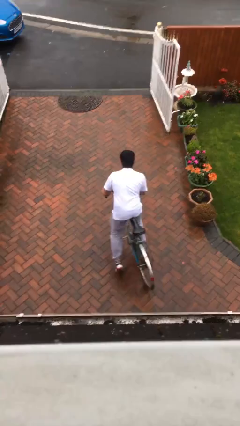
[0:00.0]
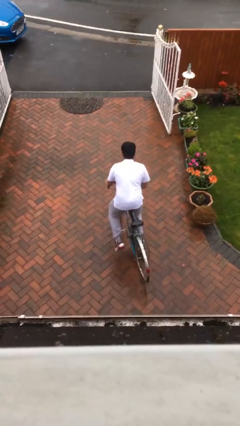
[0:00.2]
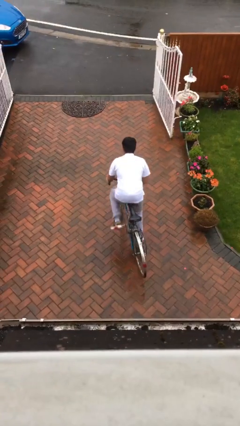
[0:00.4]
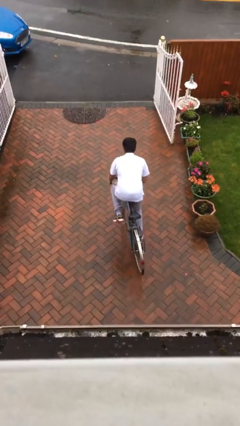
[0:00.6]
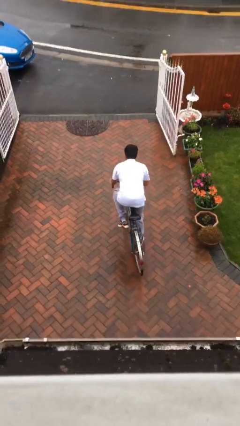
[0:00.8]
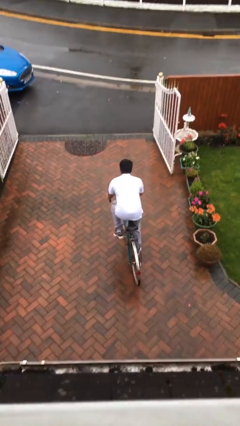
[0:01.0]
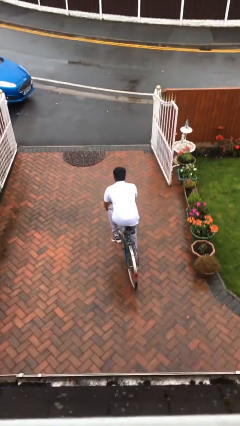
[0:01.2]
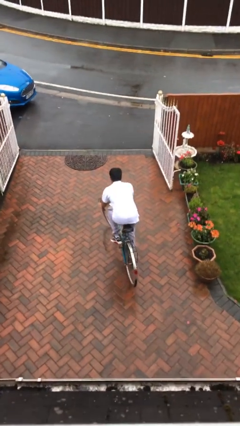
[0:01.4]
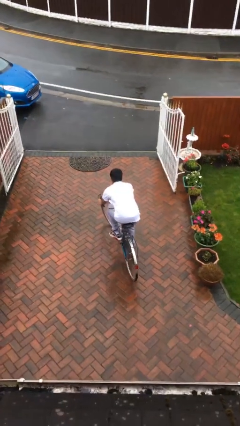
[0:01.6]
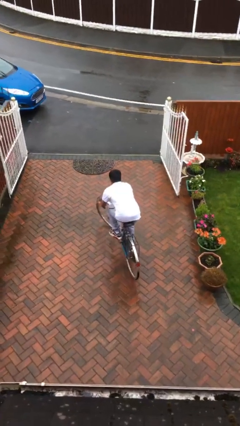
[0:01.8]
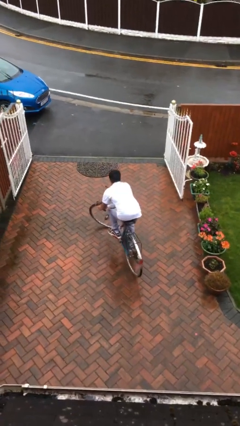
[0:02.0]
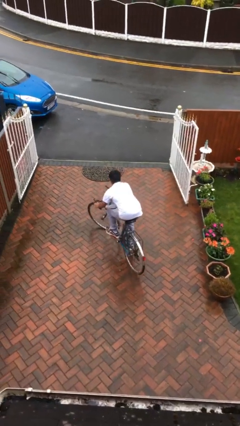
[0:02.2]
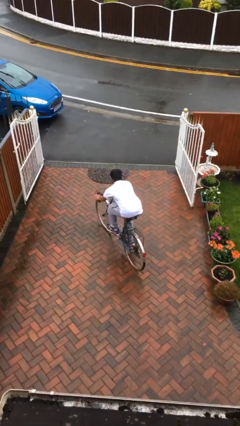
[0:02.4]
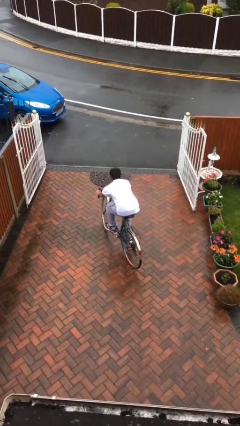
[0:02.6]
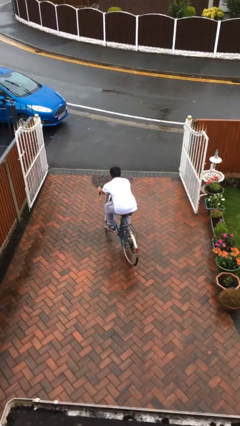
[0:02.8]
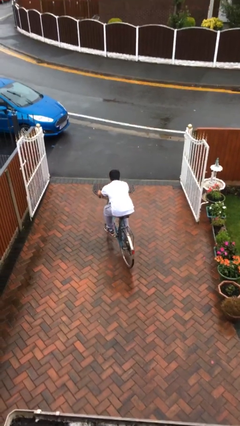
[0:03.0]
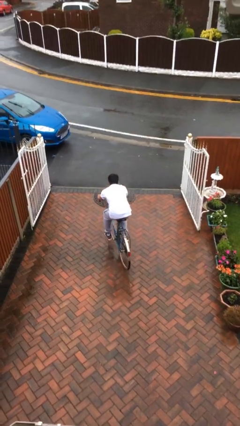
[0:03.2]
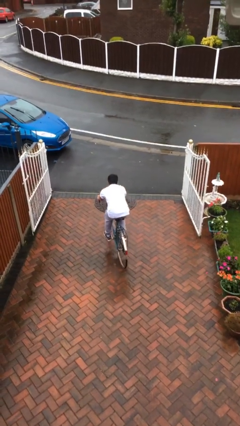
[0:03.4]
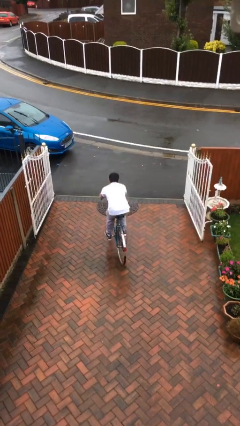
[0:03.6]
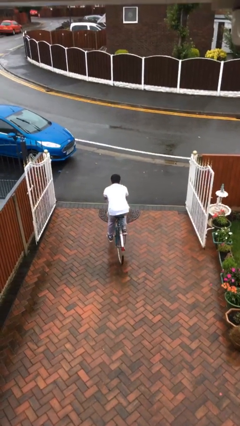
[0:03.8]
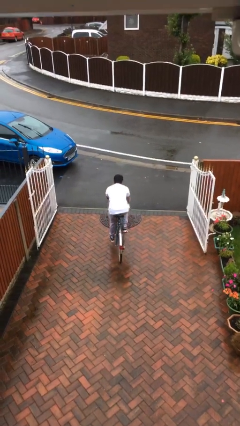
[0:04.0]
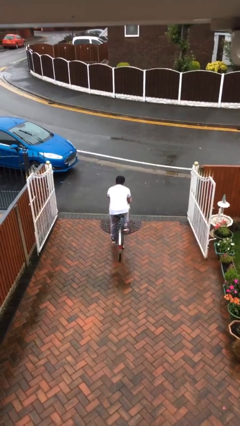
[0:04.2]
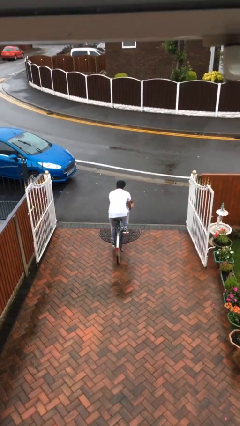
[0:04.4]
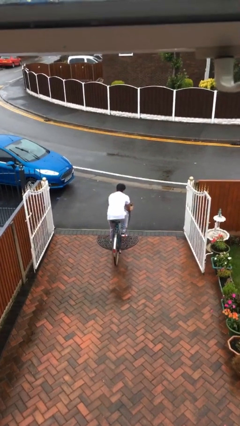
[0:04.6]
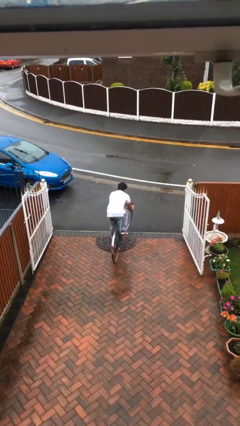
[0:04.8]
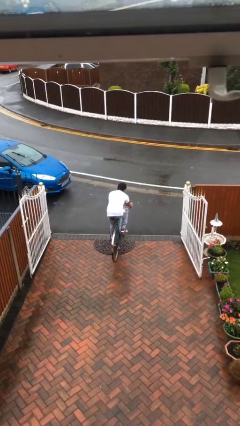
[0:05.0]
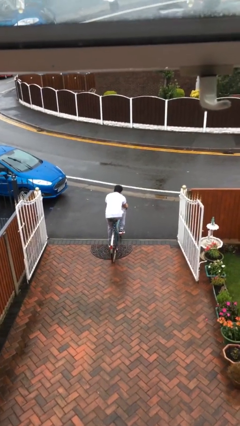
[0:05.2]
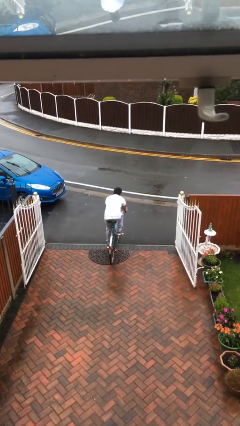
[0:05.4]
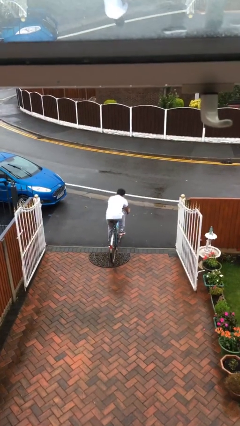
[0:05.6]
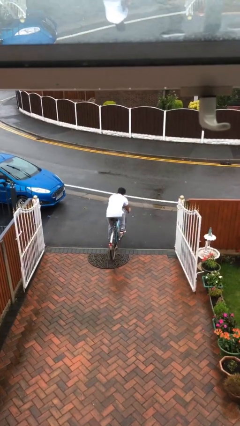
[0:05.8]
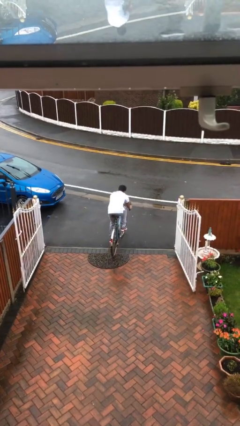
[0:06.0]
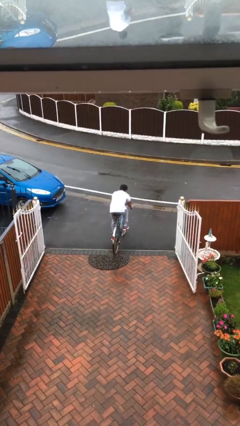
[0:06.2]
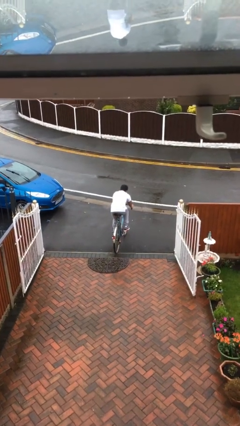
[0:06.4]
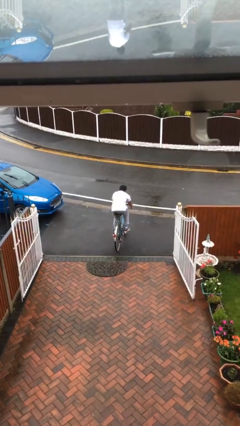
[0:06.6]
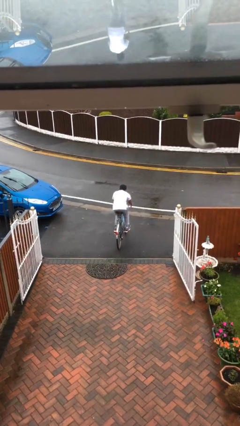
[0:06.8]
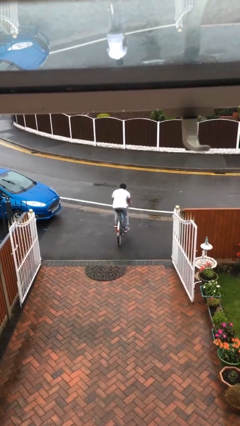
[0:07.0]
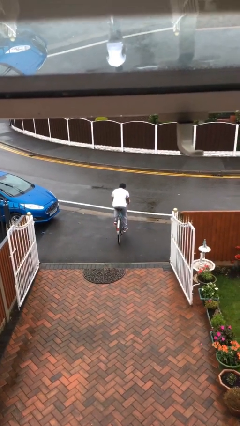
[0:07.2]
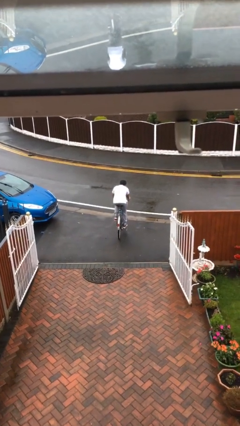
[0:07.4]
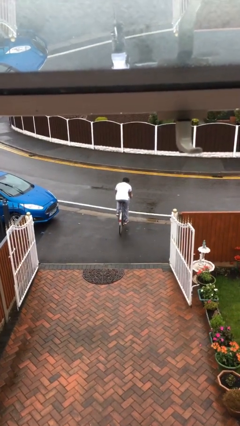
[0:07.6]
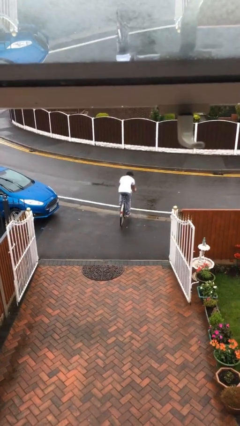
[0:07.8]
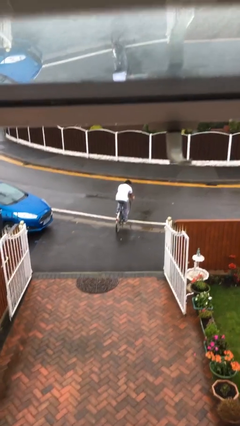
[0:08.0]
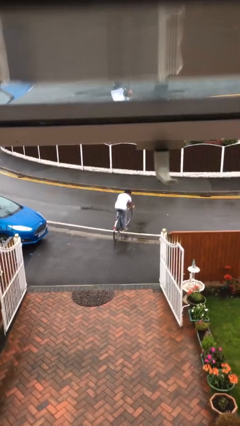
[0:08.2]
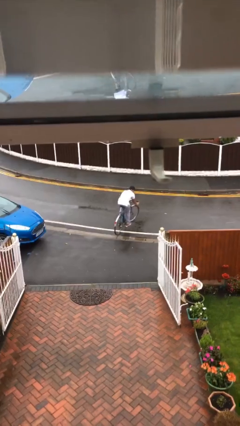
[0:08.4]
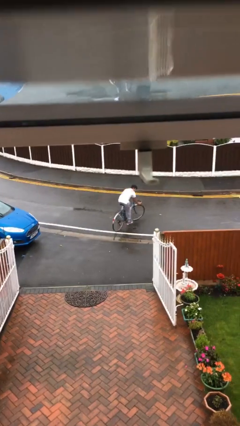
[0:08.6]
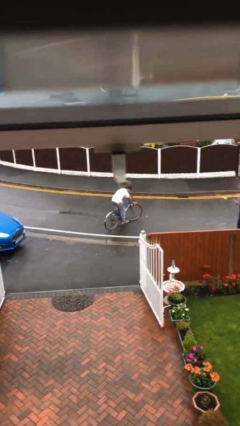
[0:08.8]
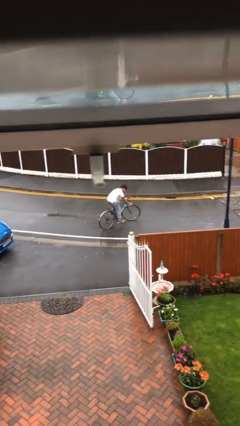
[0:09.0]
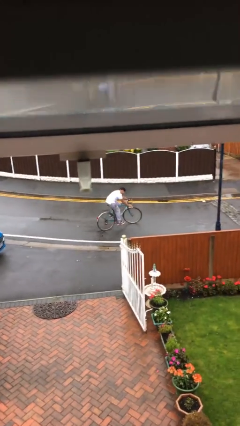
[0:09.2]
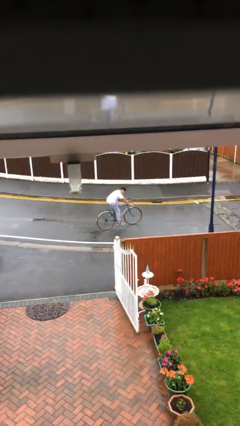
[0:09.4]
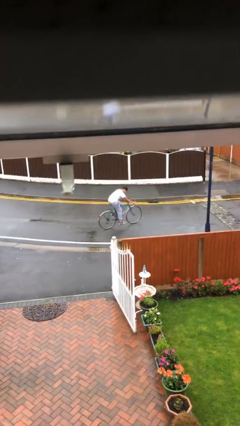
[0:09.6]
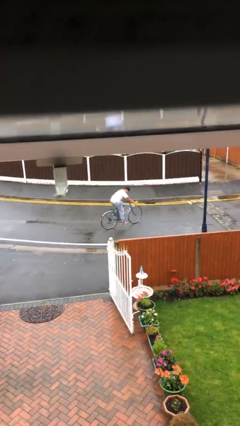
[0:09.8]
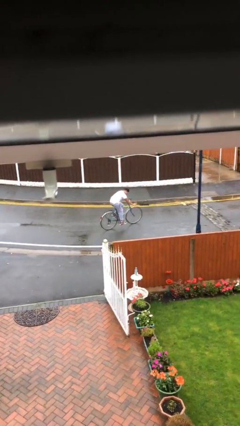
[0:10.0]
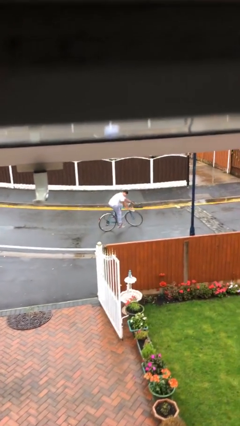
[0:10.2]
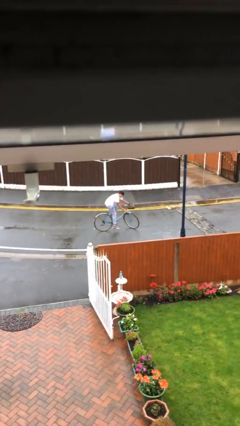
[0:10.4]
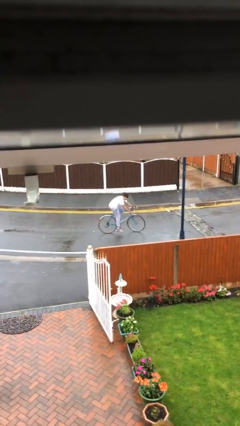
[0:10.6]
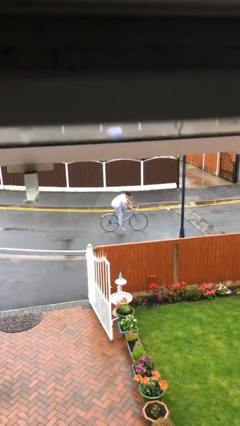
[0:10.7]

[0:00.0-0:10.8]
person rides bicycle

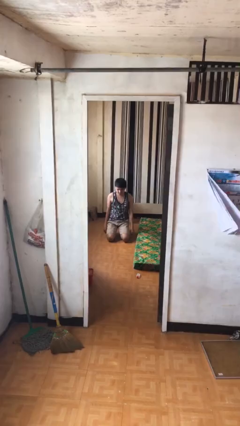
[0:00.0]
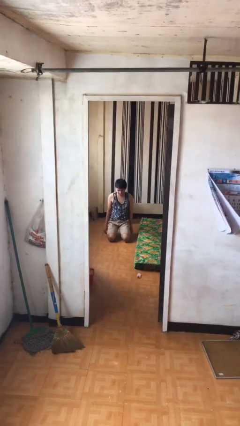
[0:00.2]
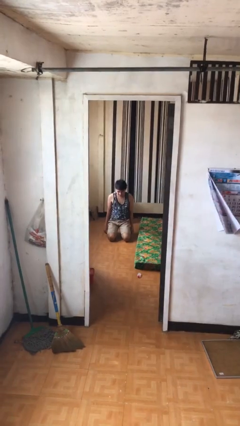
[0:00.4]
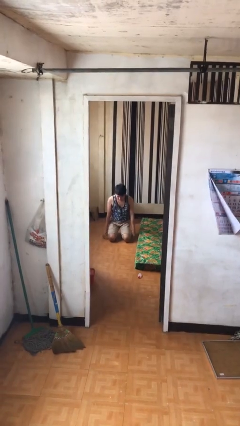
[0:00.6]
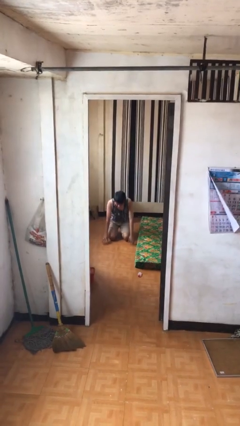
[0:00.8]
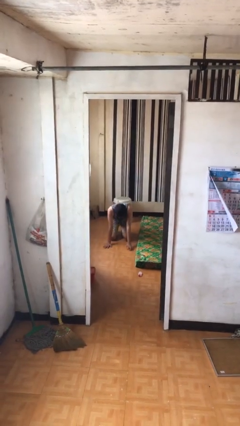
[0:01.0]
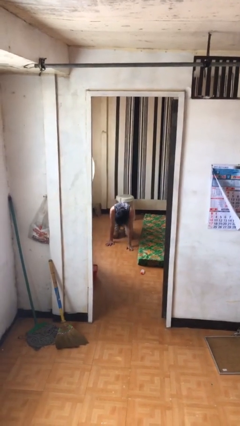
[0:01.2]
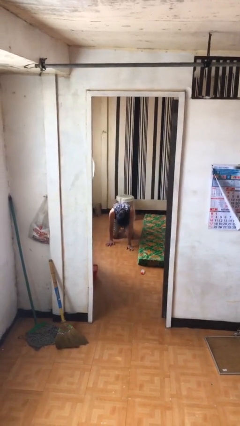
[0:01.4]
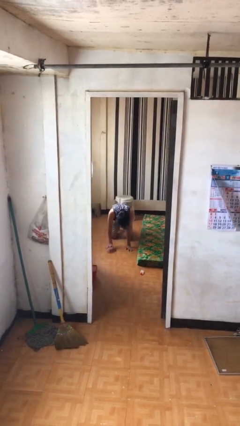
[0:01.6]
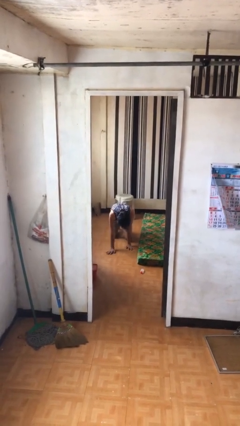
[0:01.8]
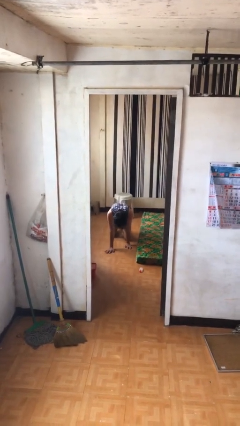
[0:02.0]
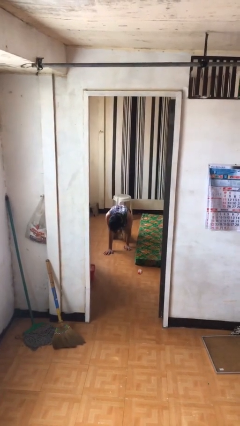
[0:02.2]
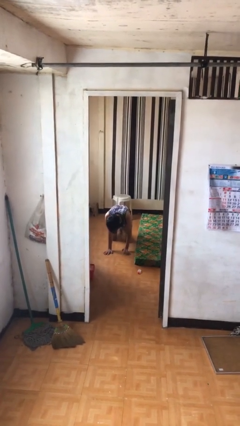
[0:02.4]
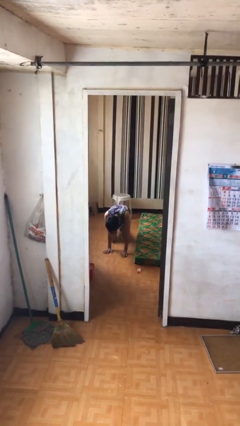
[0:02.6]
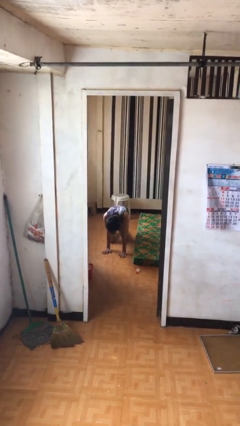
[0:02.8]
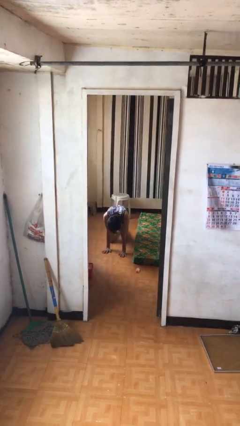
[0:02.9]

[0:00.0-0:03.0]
person crawls

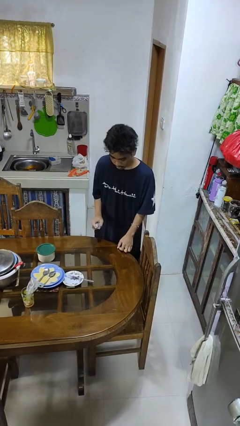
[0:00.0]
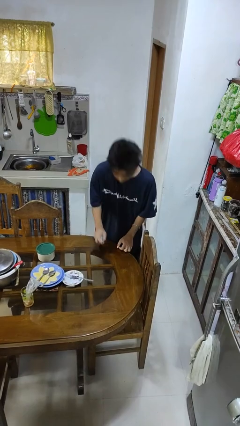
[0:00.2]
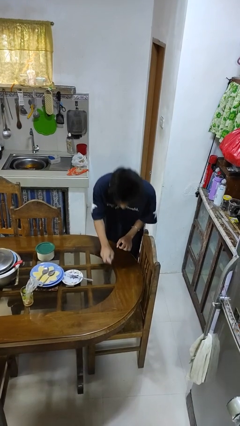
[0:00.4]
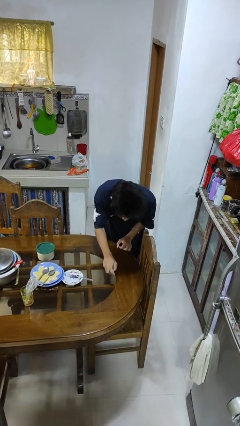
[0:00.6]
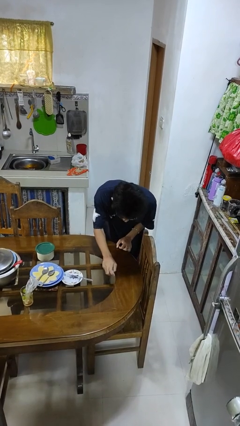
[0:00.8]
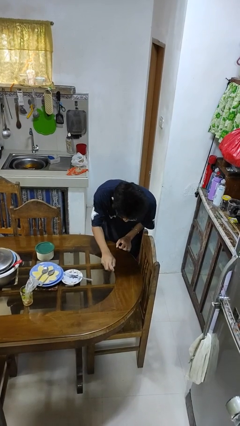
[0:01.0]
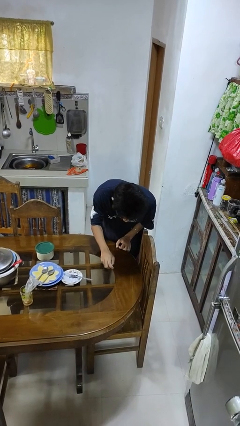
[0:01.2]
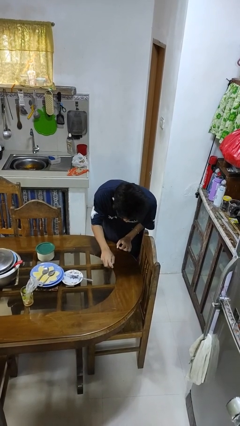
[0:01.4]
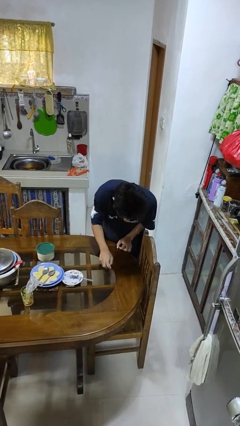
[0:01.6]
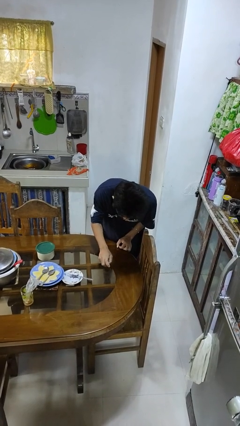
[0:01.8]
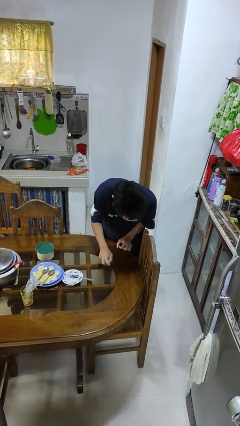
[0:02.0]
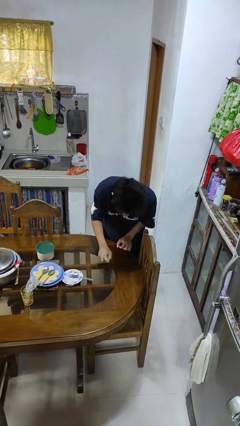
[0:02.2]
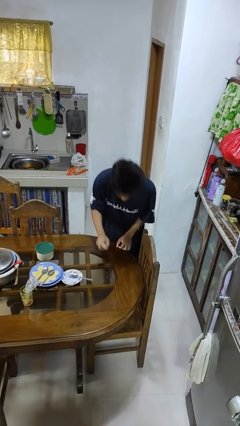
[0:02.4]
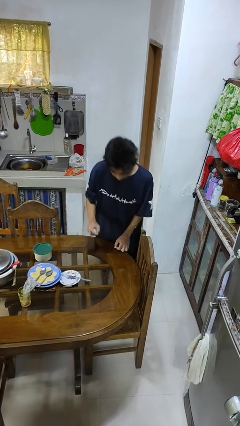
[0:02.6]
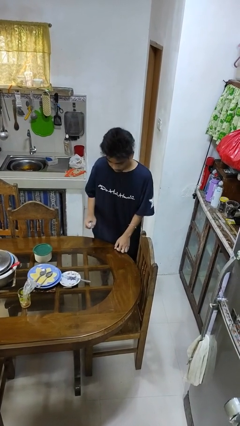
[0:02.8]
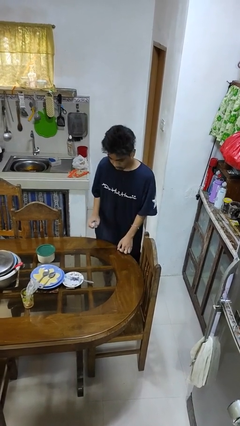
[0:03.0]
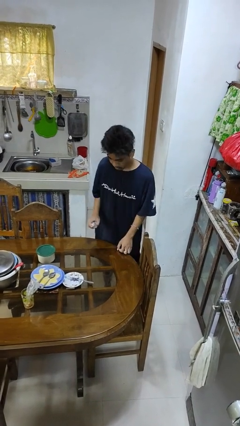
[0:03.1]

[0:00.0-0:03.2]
person sprays from bottle

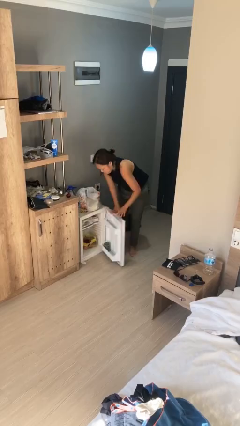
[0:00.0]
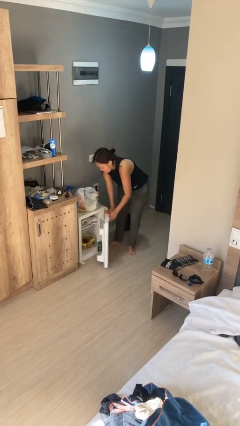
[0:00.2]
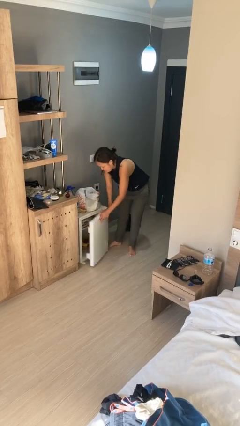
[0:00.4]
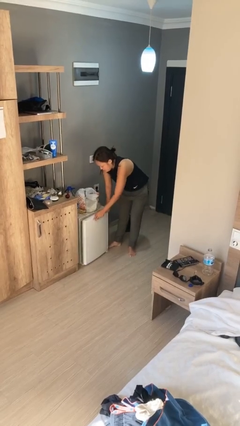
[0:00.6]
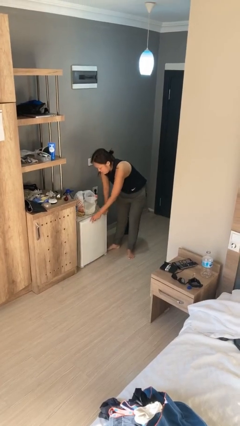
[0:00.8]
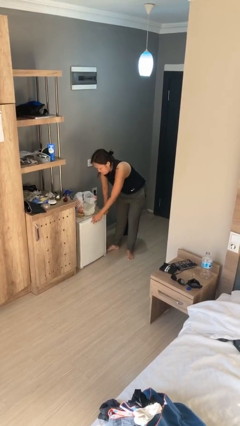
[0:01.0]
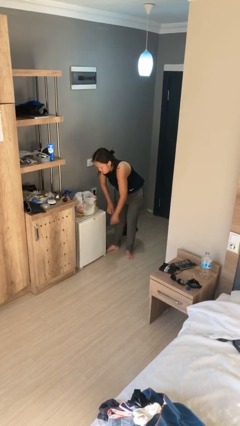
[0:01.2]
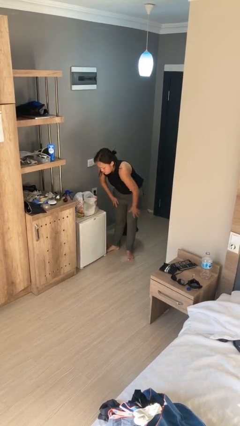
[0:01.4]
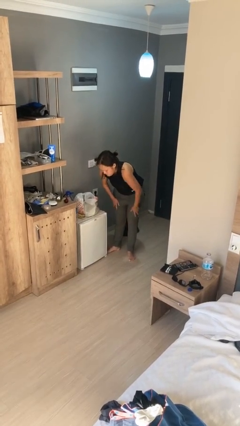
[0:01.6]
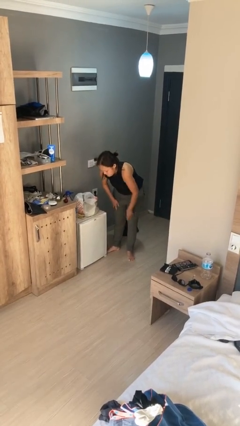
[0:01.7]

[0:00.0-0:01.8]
person closes refrigerator
